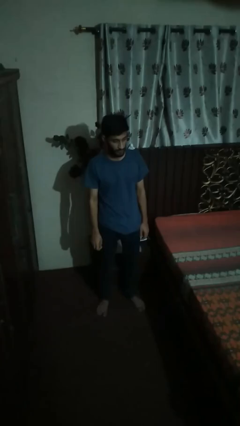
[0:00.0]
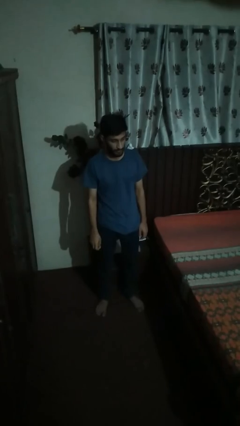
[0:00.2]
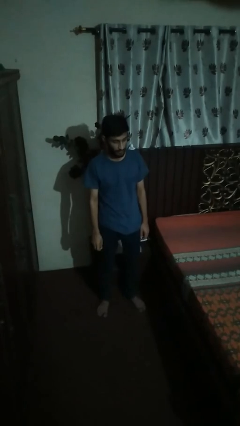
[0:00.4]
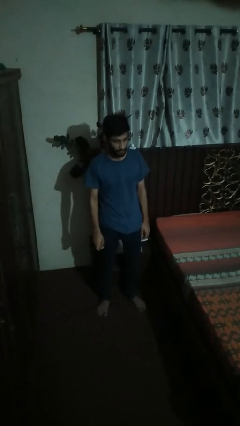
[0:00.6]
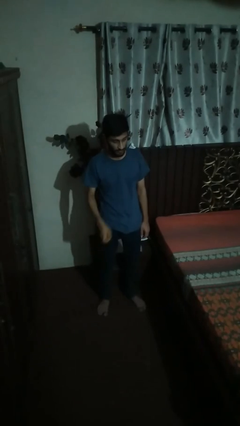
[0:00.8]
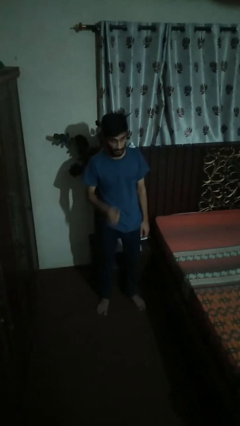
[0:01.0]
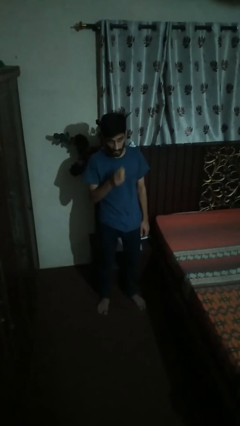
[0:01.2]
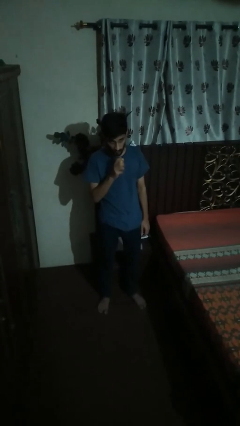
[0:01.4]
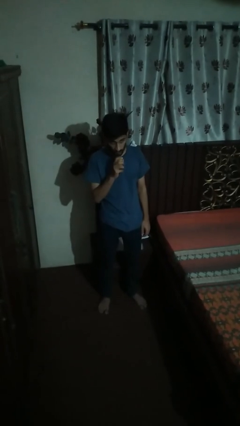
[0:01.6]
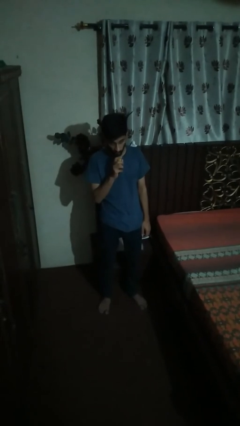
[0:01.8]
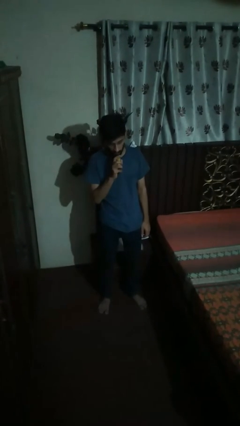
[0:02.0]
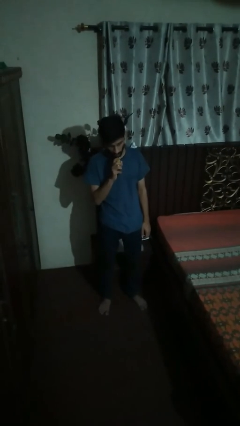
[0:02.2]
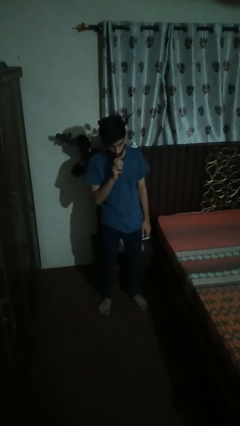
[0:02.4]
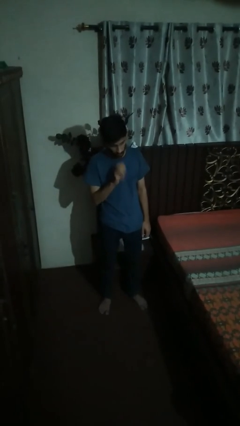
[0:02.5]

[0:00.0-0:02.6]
person eats banana

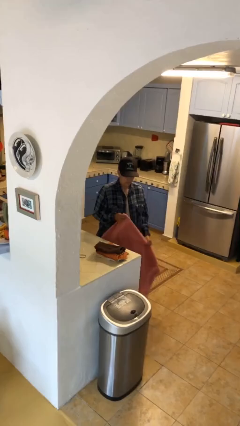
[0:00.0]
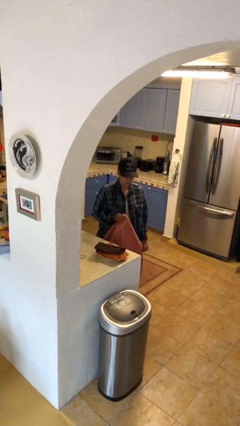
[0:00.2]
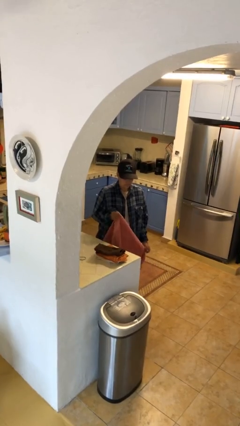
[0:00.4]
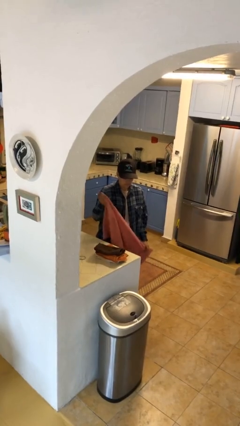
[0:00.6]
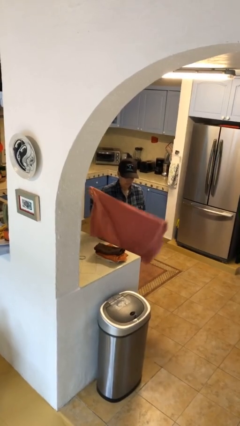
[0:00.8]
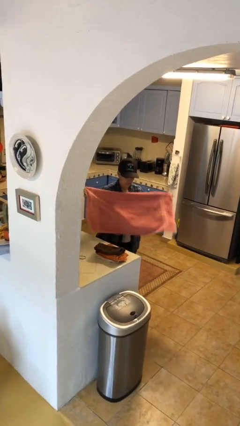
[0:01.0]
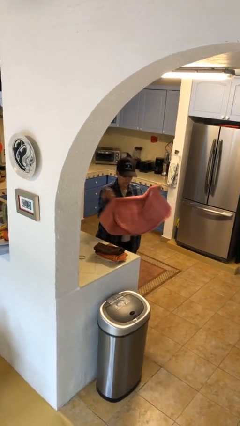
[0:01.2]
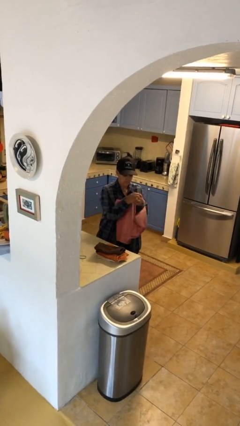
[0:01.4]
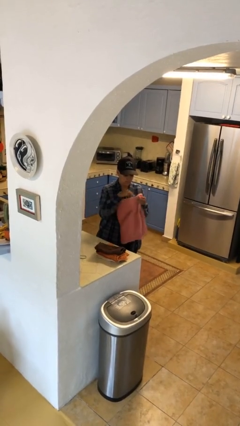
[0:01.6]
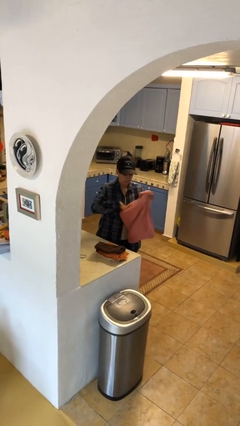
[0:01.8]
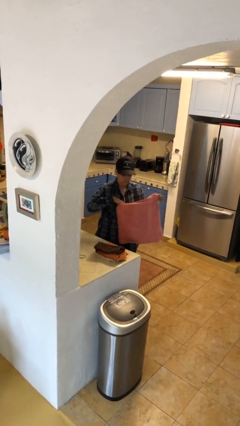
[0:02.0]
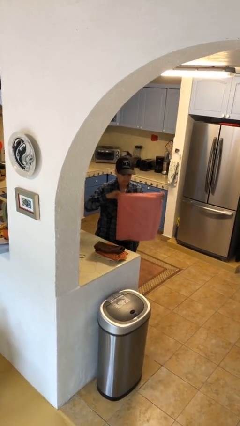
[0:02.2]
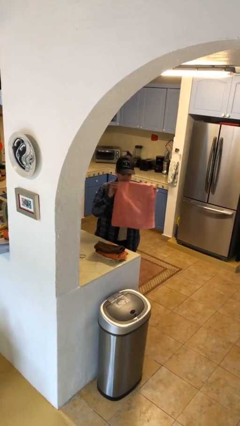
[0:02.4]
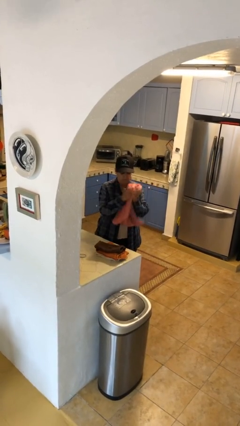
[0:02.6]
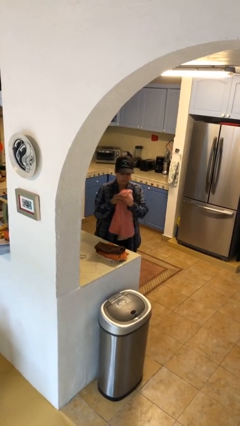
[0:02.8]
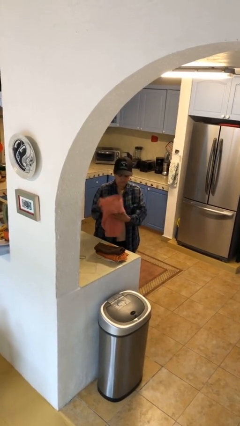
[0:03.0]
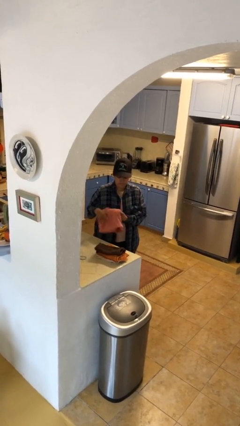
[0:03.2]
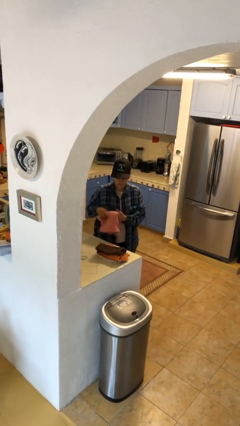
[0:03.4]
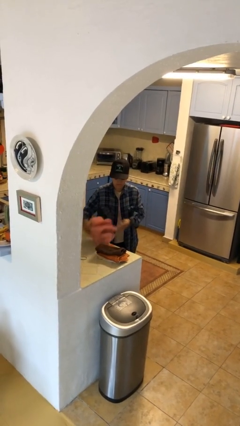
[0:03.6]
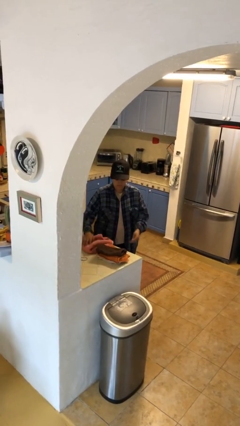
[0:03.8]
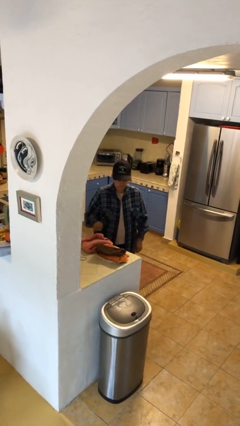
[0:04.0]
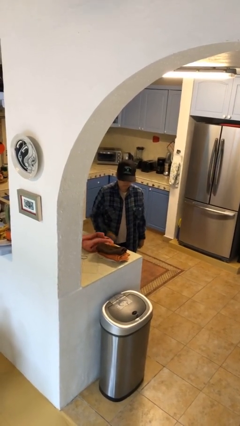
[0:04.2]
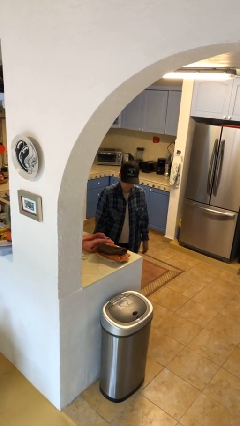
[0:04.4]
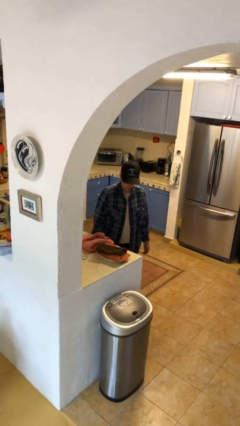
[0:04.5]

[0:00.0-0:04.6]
person folds towel

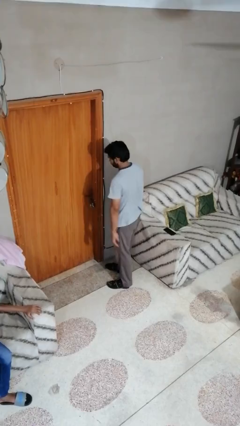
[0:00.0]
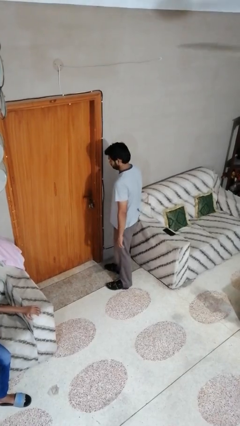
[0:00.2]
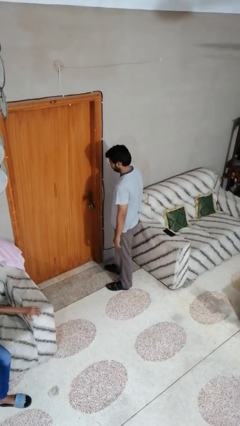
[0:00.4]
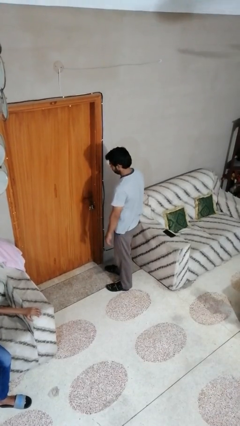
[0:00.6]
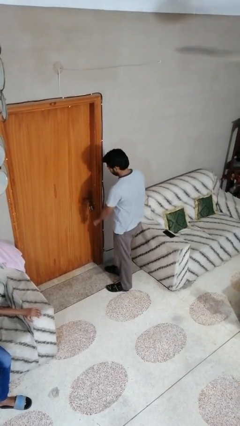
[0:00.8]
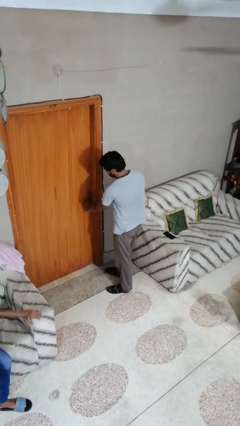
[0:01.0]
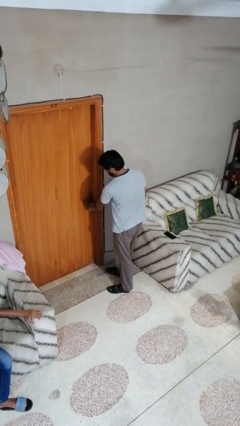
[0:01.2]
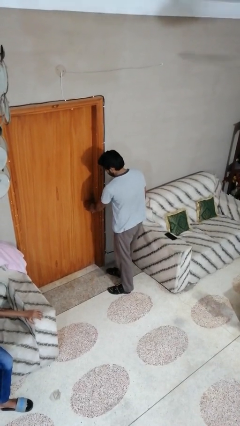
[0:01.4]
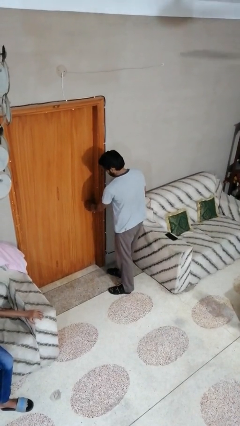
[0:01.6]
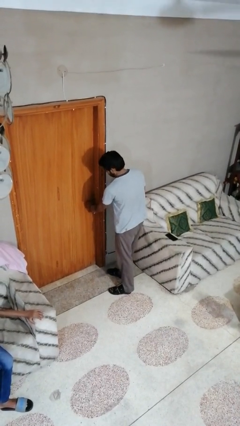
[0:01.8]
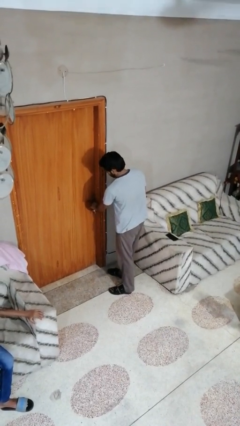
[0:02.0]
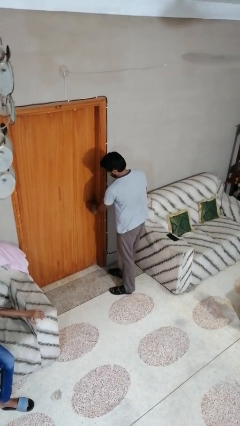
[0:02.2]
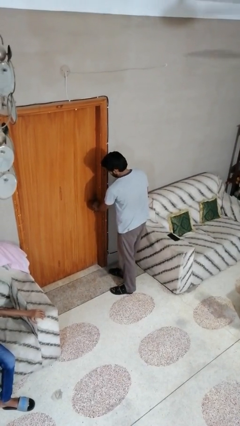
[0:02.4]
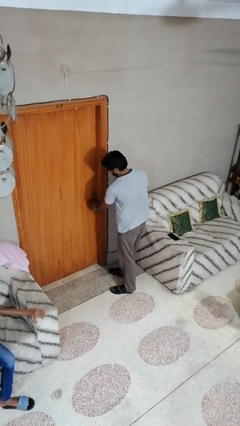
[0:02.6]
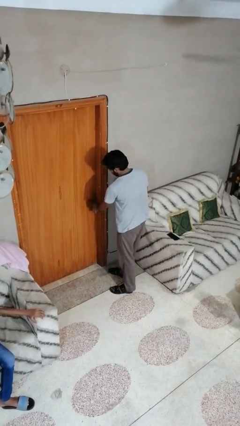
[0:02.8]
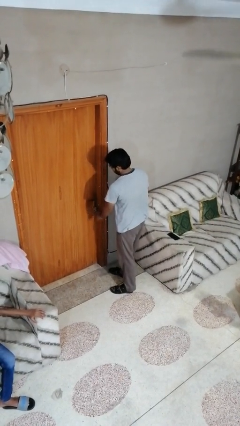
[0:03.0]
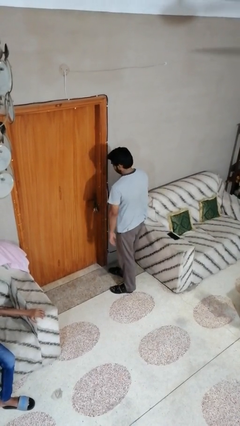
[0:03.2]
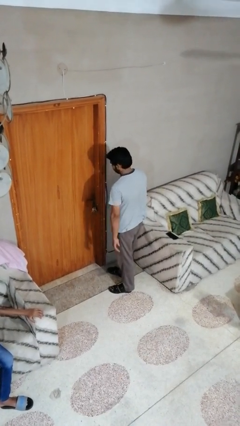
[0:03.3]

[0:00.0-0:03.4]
person unlocks door with keys

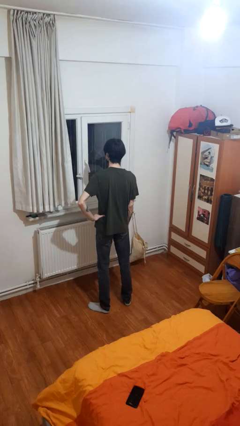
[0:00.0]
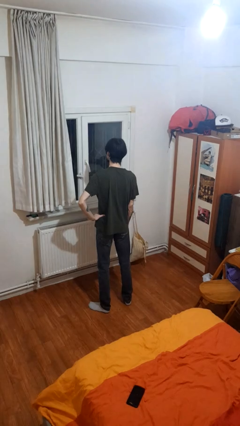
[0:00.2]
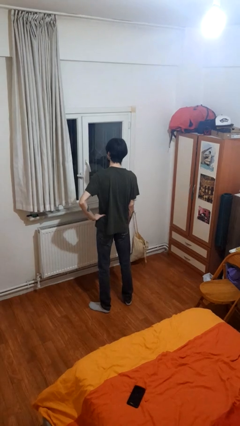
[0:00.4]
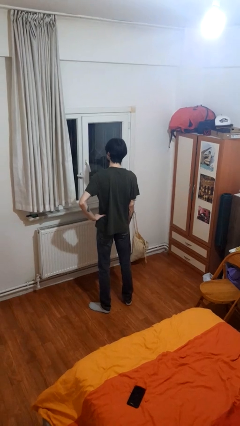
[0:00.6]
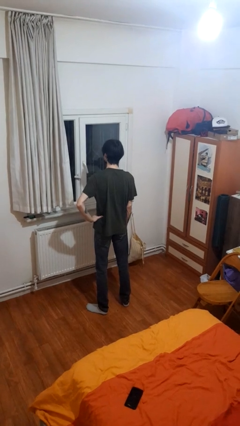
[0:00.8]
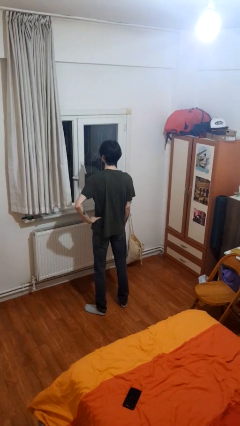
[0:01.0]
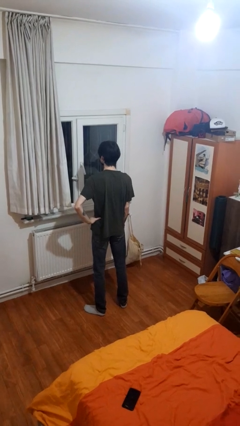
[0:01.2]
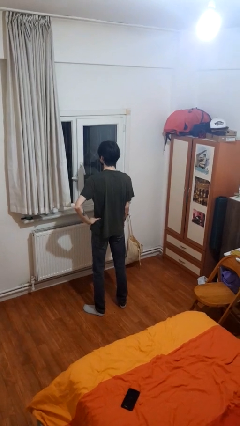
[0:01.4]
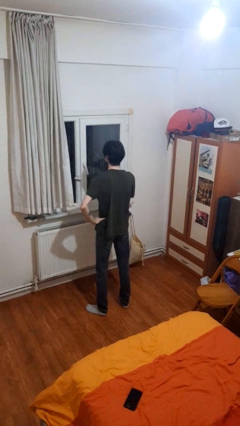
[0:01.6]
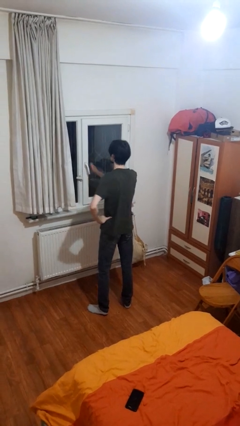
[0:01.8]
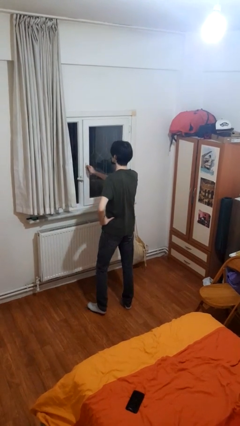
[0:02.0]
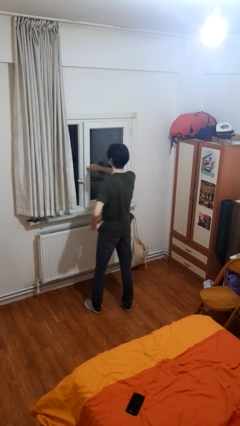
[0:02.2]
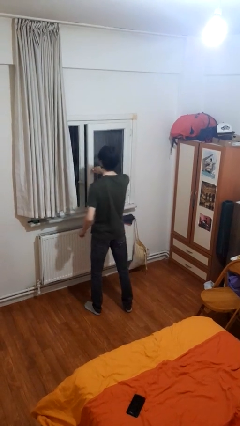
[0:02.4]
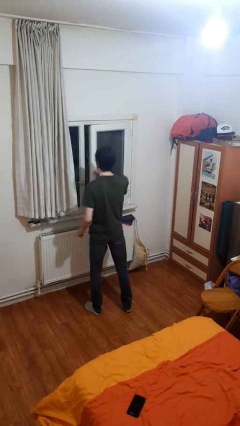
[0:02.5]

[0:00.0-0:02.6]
person opens home window

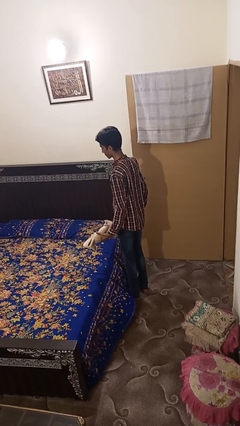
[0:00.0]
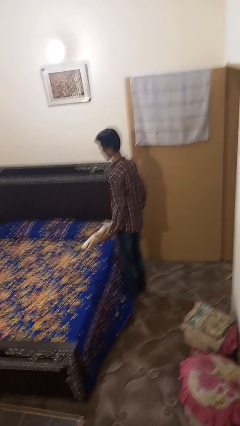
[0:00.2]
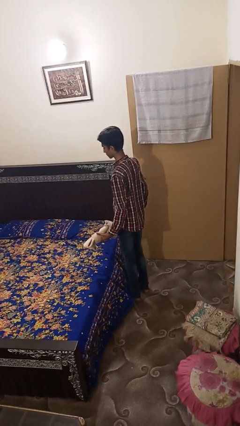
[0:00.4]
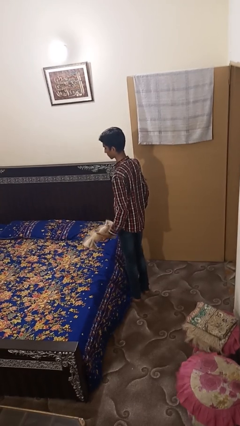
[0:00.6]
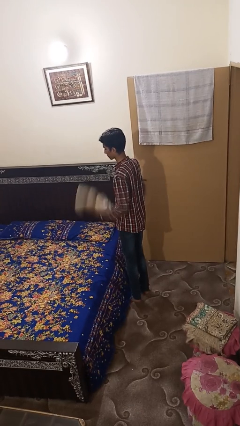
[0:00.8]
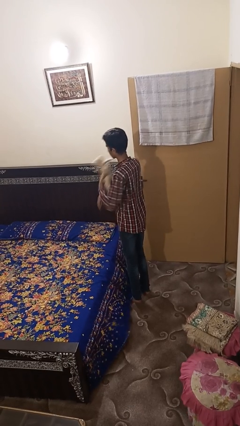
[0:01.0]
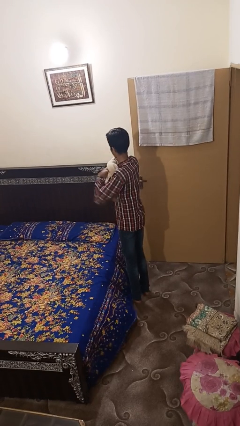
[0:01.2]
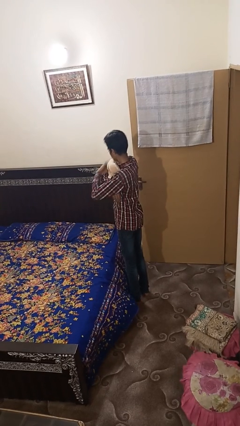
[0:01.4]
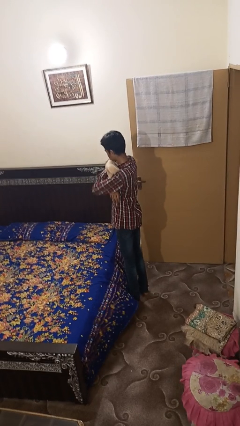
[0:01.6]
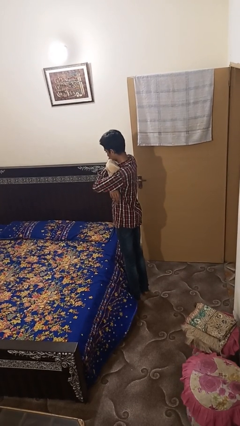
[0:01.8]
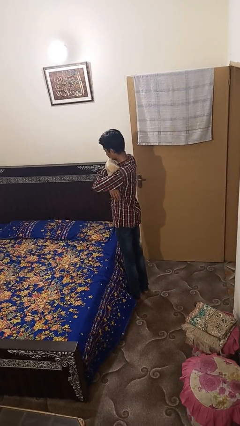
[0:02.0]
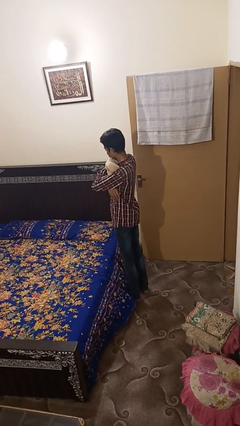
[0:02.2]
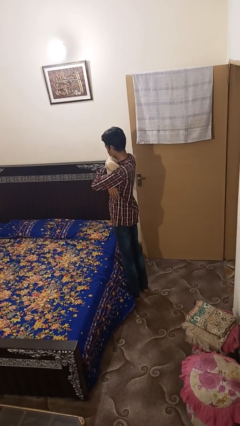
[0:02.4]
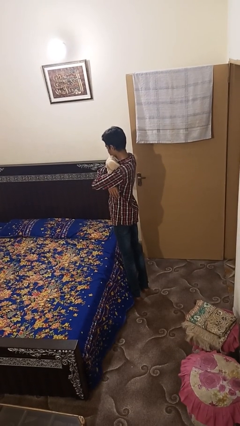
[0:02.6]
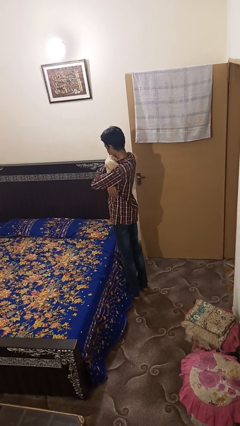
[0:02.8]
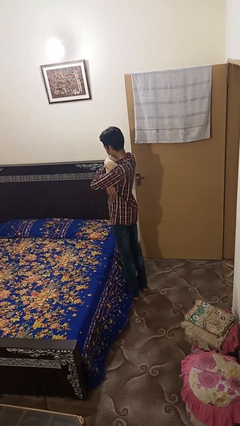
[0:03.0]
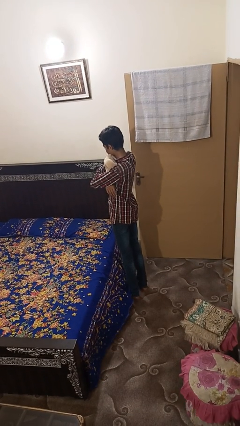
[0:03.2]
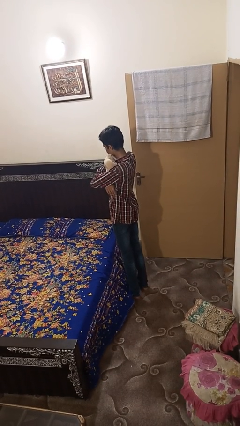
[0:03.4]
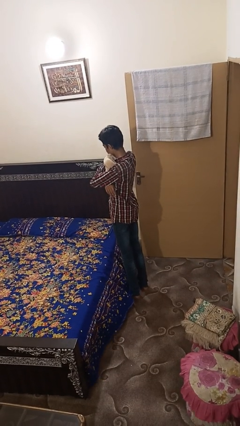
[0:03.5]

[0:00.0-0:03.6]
person hugs stuffed animal

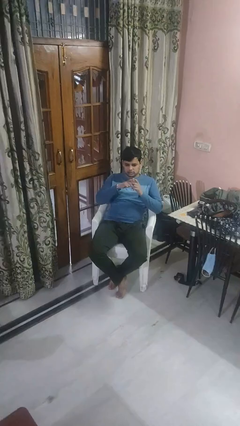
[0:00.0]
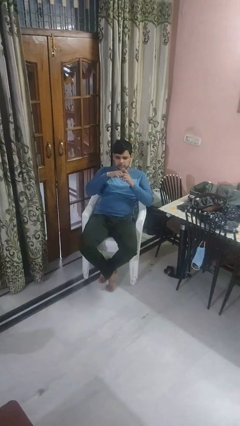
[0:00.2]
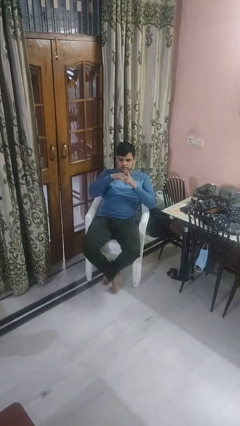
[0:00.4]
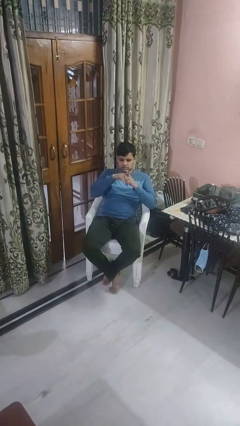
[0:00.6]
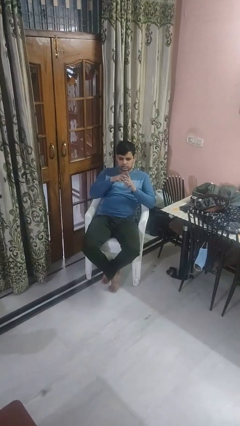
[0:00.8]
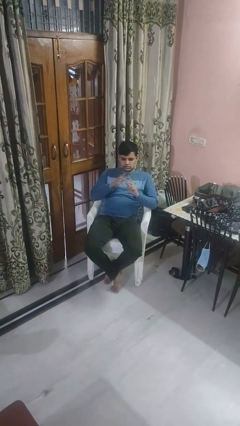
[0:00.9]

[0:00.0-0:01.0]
person puts on ring
